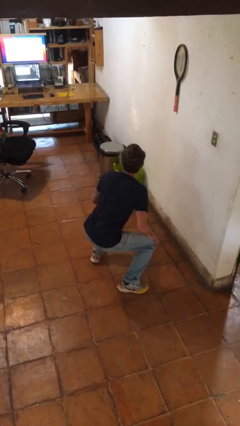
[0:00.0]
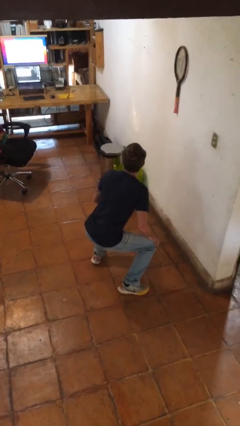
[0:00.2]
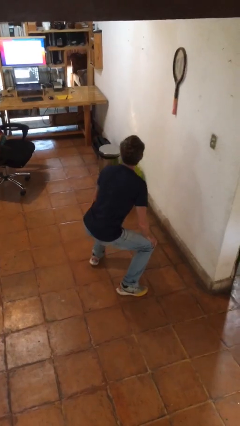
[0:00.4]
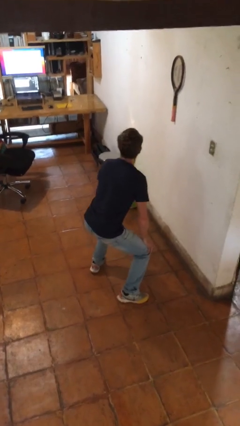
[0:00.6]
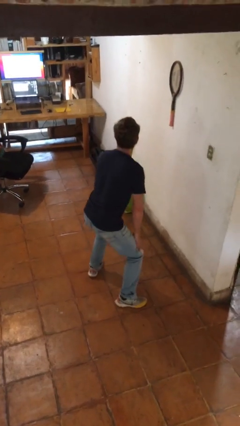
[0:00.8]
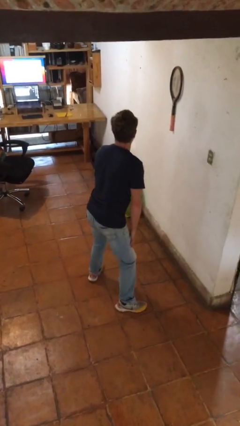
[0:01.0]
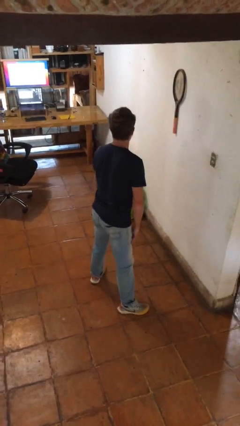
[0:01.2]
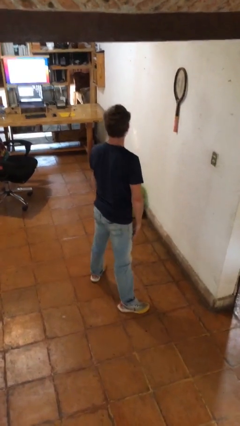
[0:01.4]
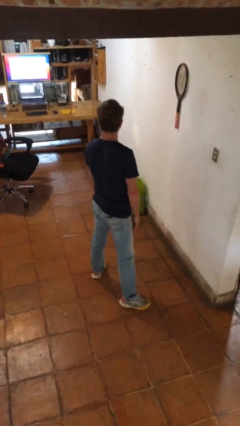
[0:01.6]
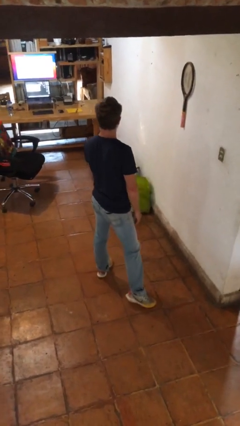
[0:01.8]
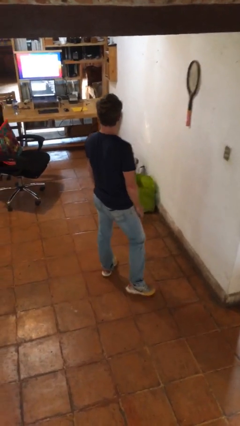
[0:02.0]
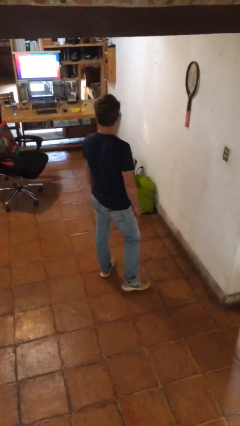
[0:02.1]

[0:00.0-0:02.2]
person stands up

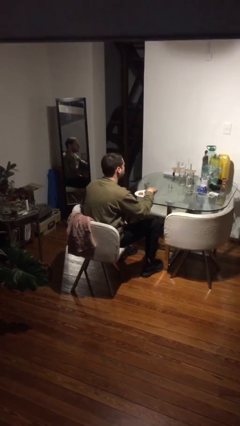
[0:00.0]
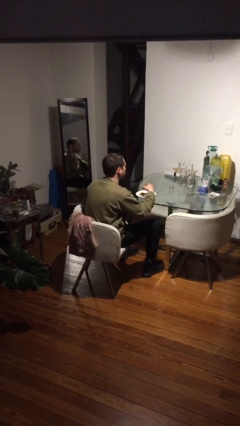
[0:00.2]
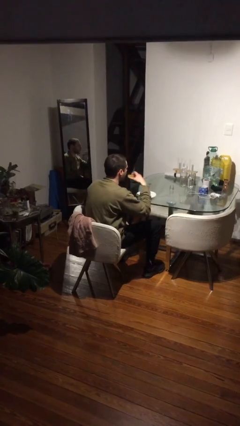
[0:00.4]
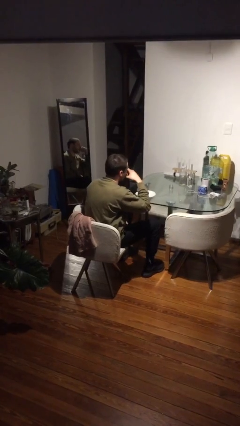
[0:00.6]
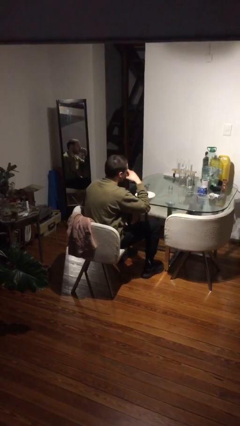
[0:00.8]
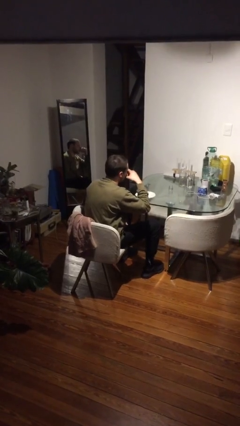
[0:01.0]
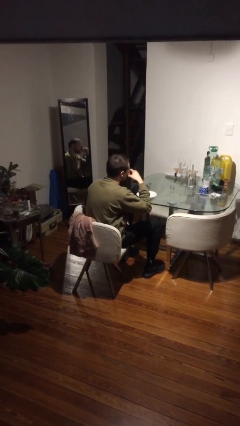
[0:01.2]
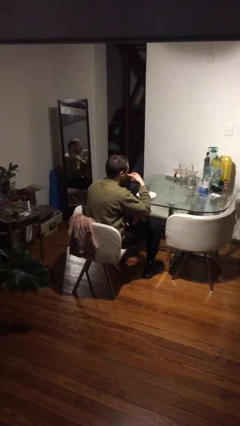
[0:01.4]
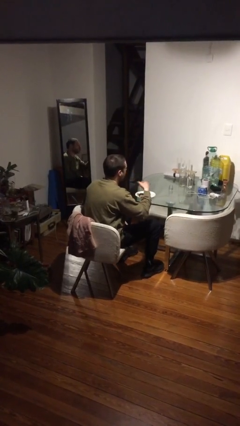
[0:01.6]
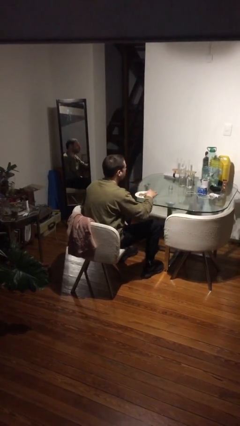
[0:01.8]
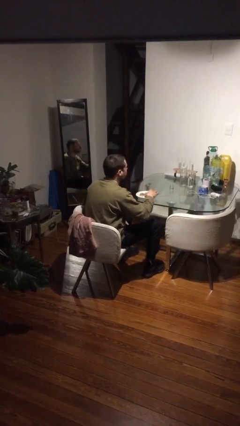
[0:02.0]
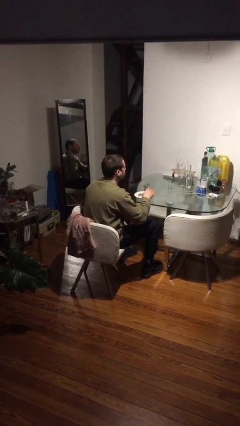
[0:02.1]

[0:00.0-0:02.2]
person eats with hands

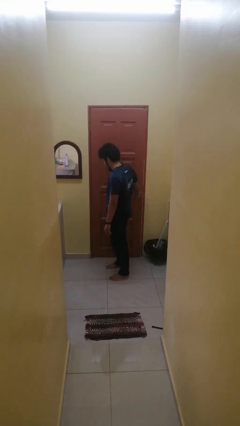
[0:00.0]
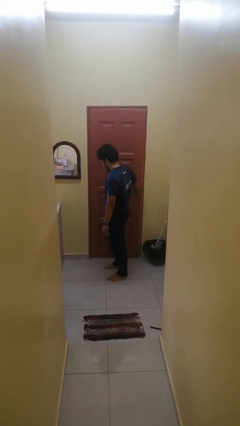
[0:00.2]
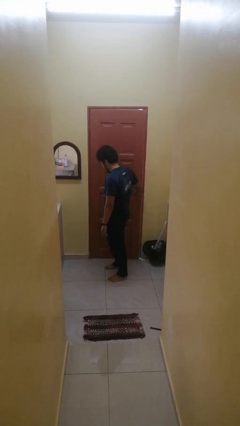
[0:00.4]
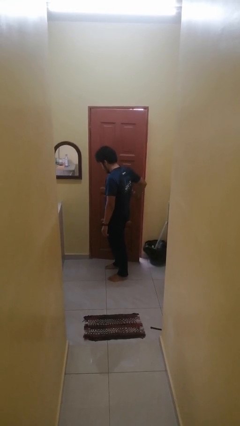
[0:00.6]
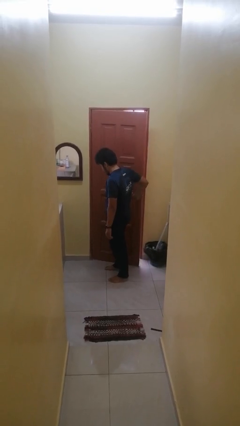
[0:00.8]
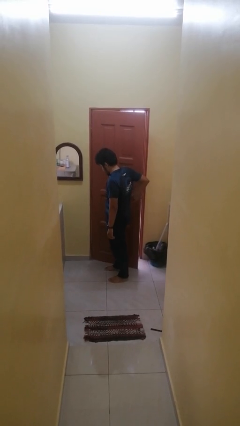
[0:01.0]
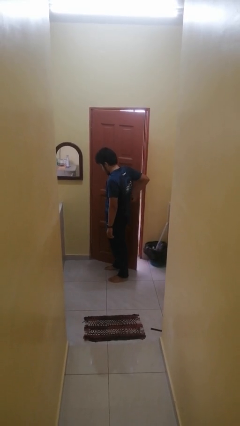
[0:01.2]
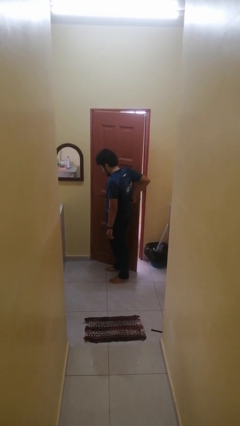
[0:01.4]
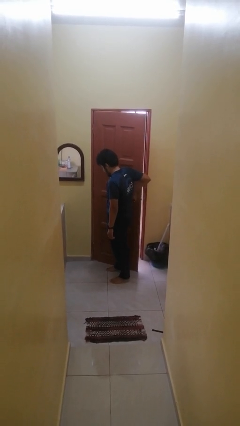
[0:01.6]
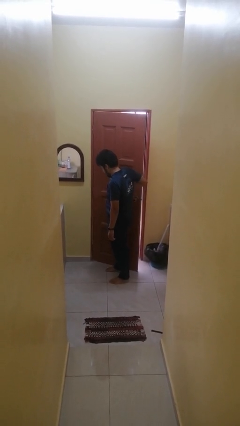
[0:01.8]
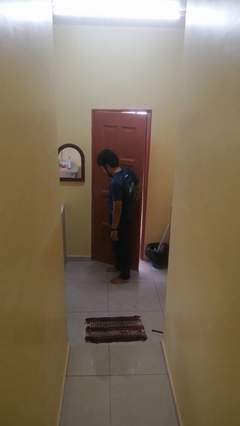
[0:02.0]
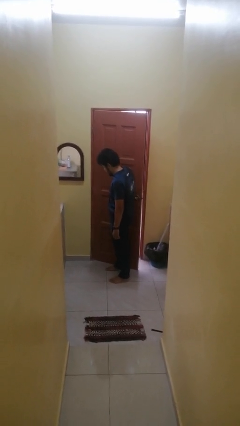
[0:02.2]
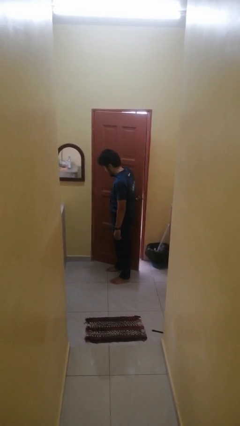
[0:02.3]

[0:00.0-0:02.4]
person opens facility door

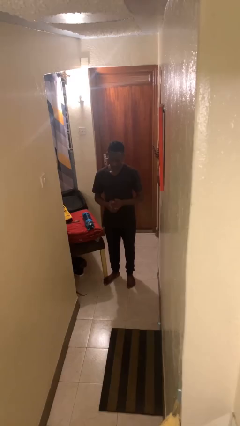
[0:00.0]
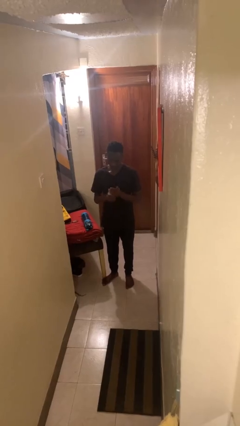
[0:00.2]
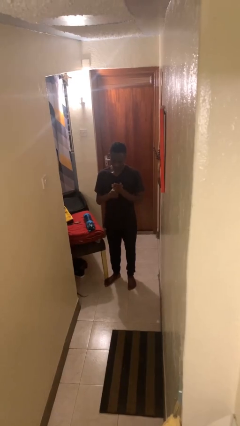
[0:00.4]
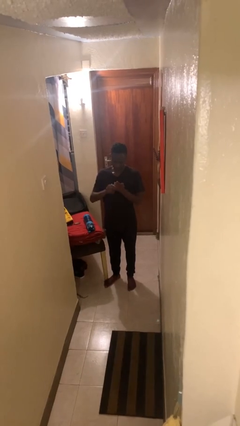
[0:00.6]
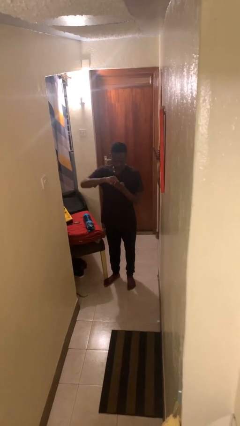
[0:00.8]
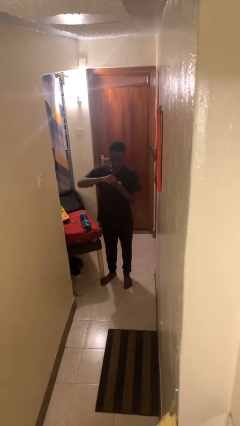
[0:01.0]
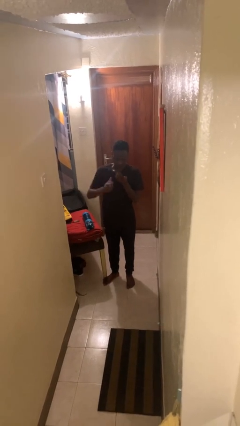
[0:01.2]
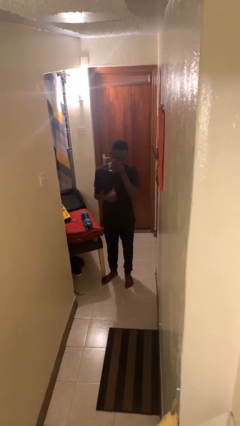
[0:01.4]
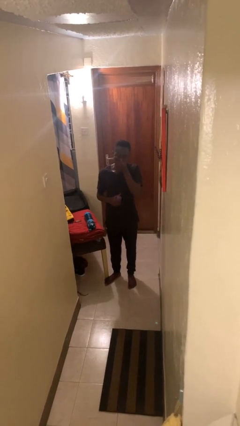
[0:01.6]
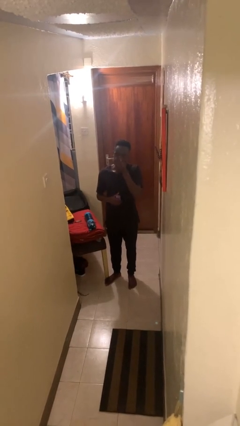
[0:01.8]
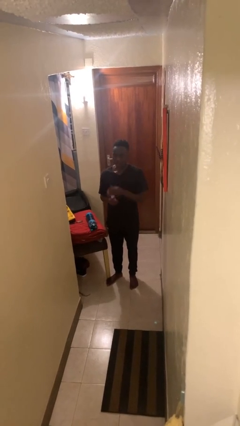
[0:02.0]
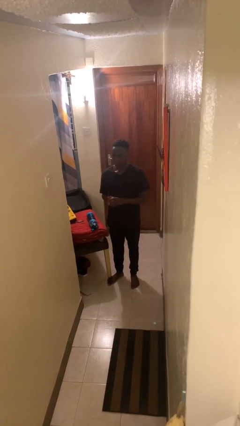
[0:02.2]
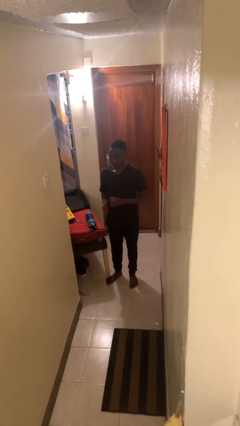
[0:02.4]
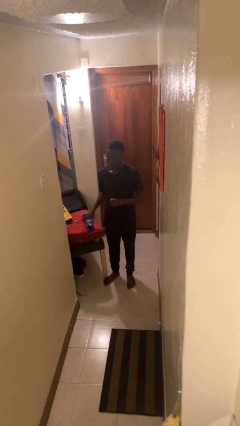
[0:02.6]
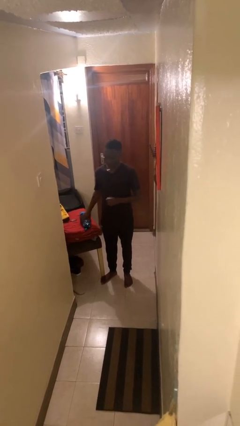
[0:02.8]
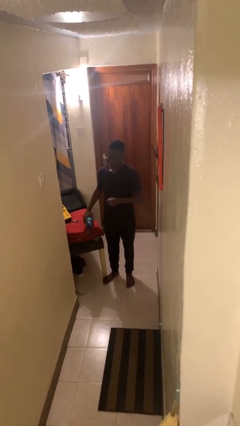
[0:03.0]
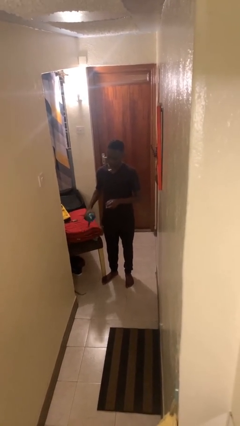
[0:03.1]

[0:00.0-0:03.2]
person takes medicine pills

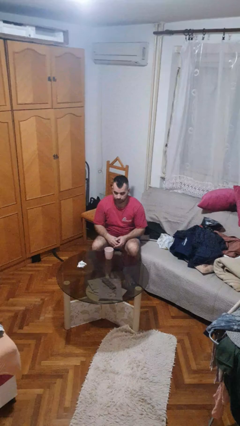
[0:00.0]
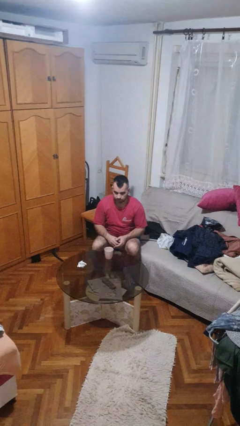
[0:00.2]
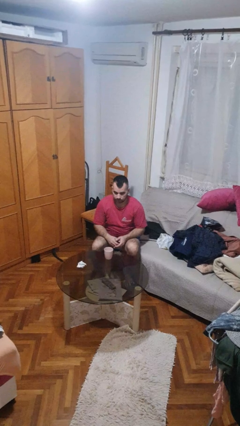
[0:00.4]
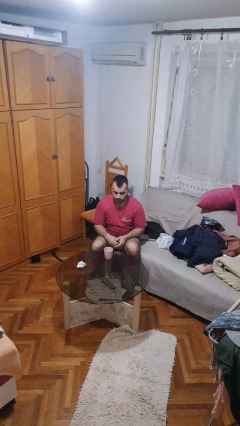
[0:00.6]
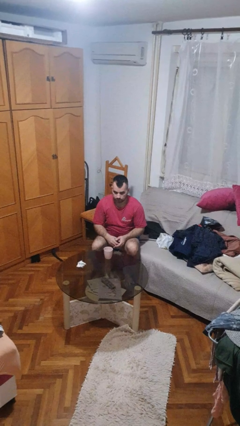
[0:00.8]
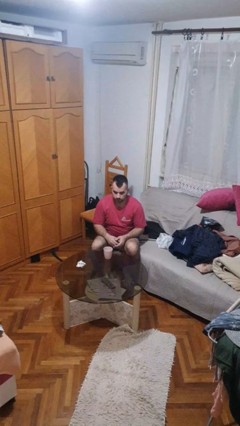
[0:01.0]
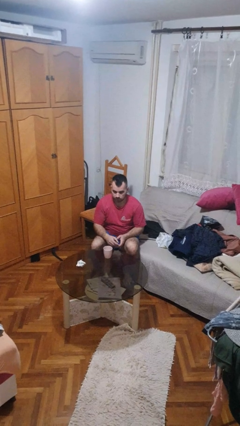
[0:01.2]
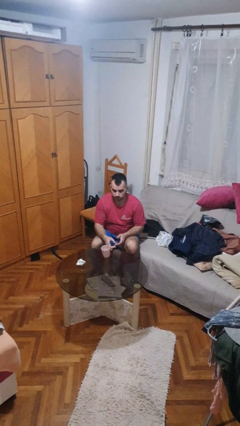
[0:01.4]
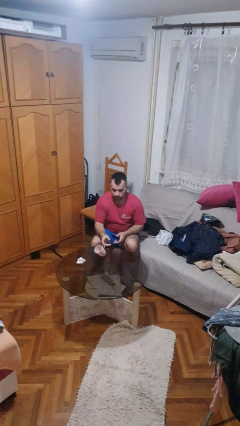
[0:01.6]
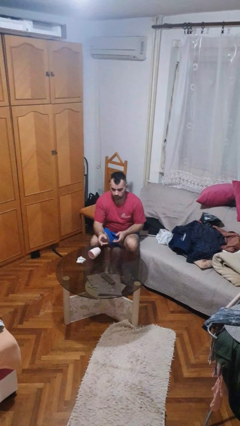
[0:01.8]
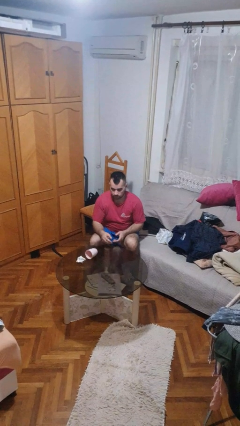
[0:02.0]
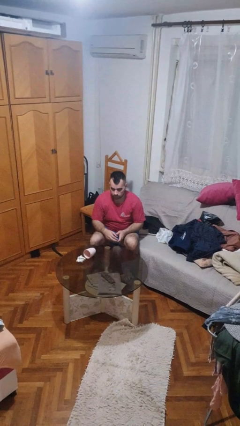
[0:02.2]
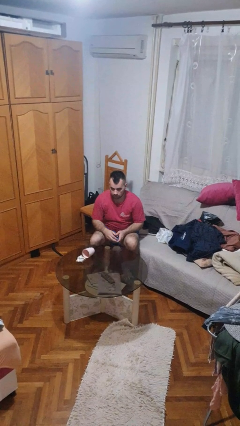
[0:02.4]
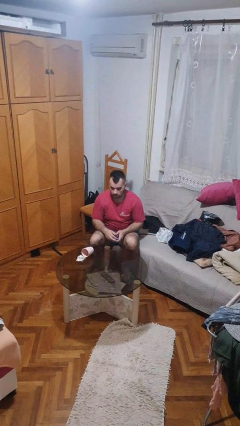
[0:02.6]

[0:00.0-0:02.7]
person knocks over glass

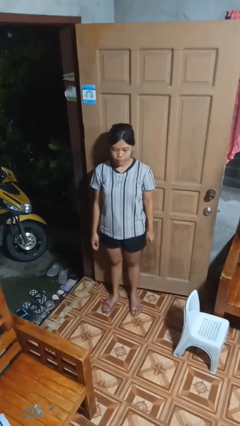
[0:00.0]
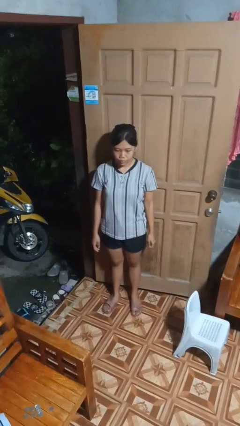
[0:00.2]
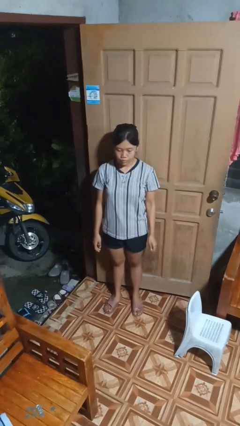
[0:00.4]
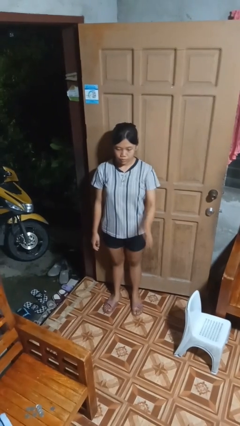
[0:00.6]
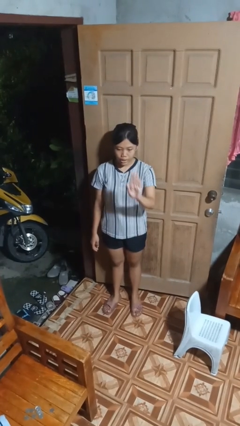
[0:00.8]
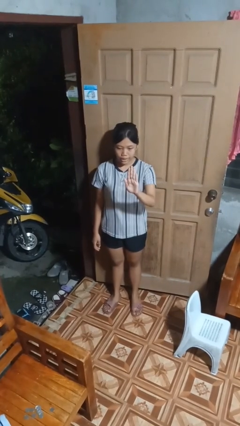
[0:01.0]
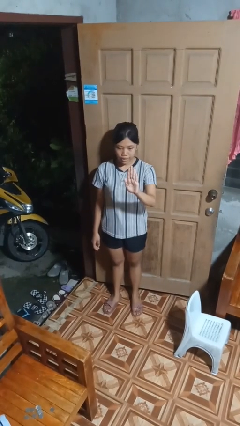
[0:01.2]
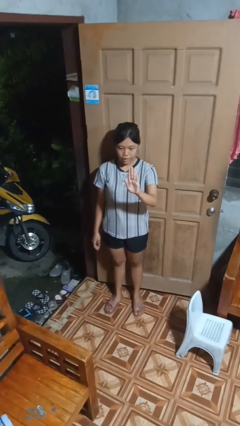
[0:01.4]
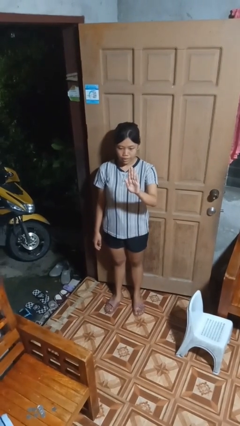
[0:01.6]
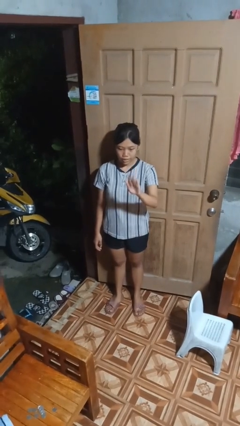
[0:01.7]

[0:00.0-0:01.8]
person gestures number five

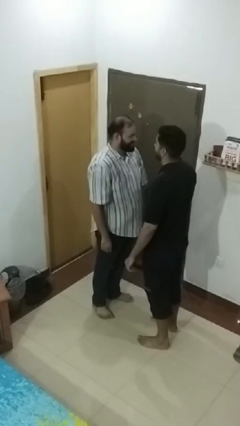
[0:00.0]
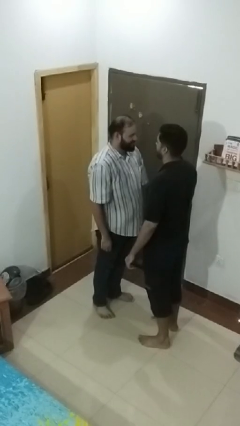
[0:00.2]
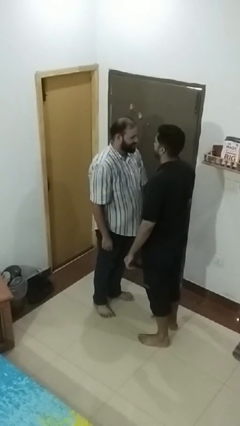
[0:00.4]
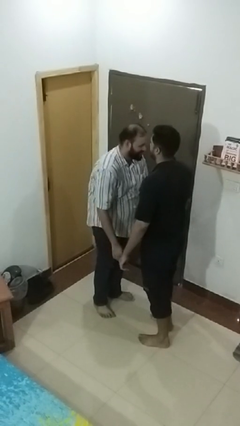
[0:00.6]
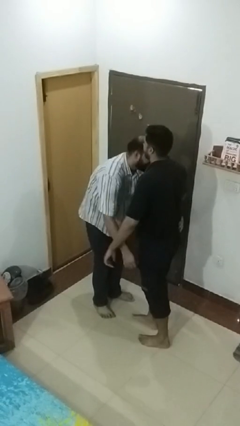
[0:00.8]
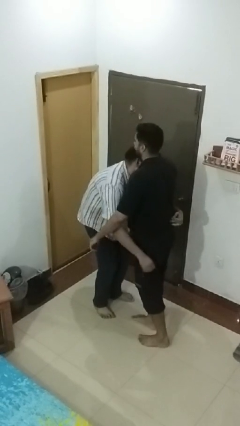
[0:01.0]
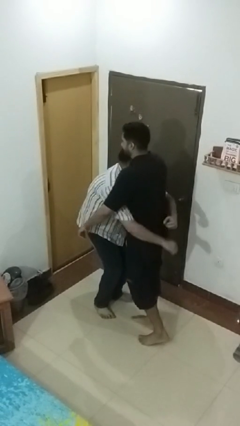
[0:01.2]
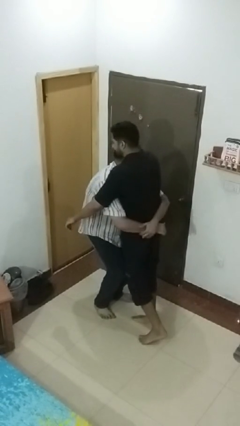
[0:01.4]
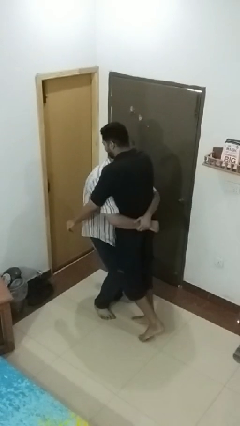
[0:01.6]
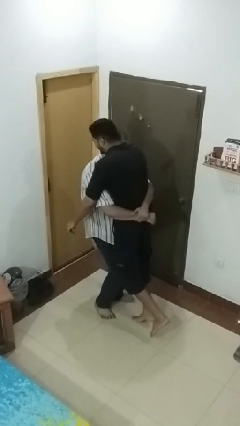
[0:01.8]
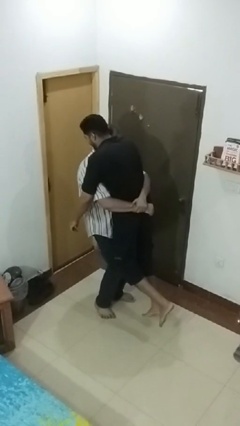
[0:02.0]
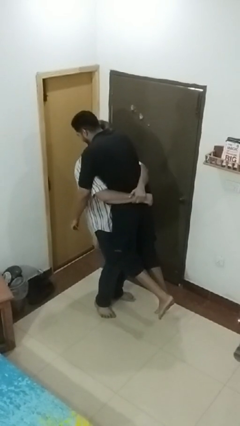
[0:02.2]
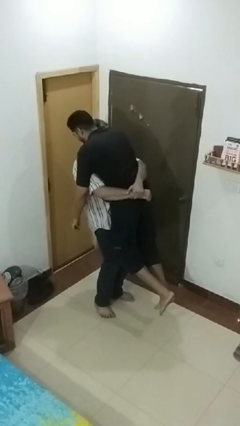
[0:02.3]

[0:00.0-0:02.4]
person picks up person

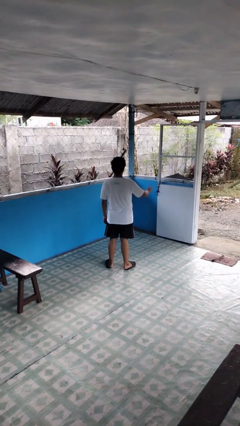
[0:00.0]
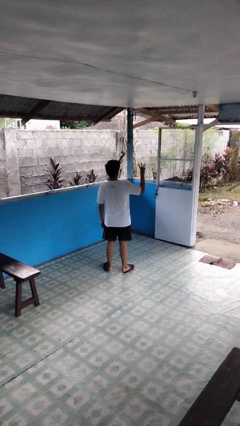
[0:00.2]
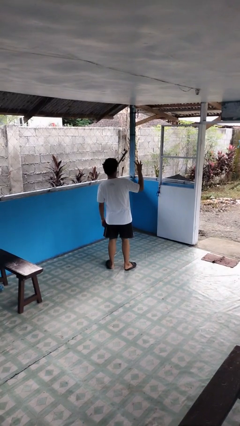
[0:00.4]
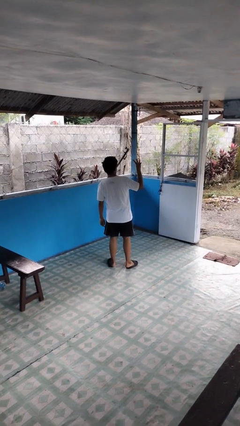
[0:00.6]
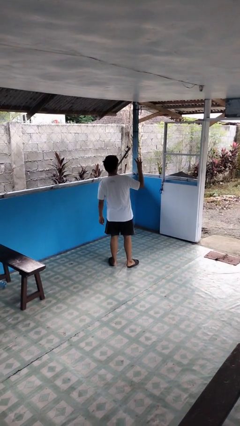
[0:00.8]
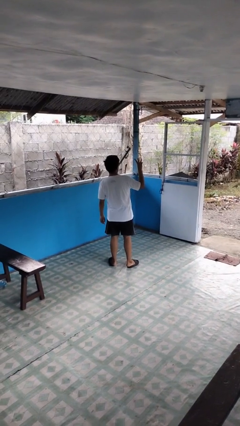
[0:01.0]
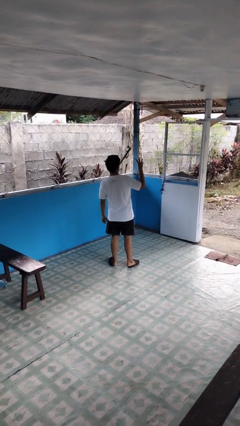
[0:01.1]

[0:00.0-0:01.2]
person gestures number three
